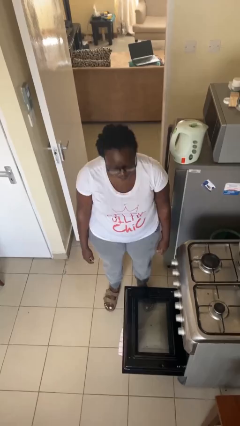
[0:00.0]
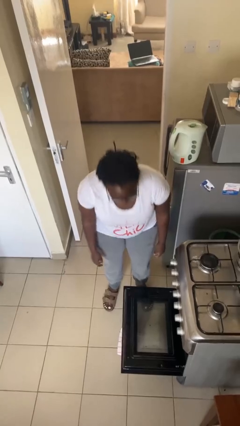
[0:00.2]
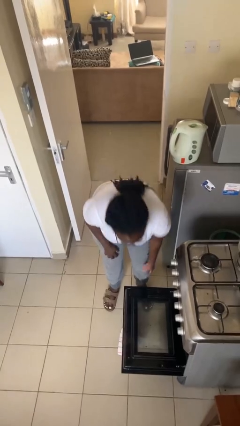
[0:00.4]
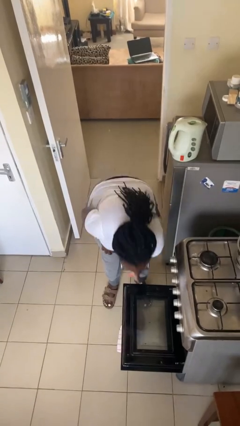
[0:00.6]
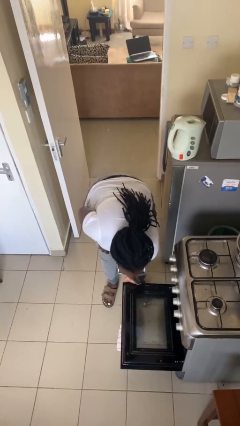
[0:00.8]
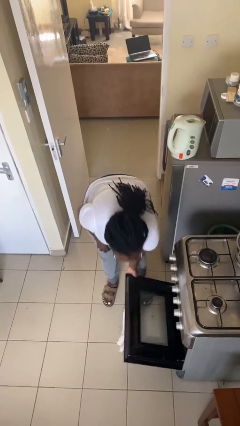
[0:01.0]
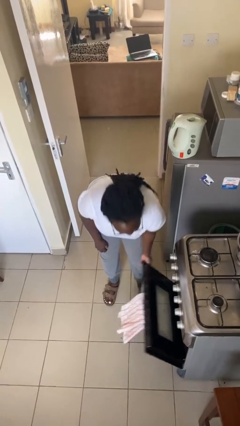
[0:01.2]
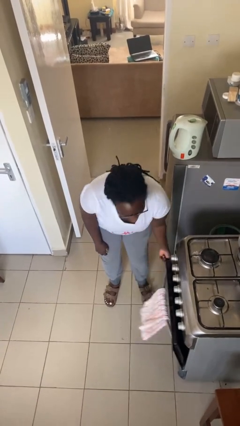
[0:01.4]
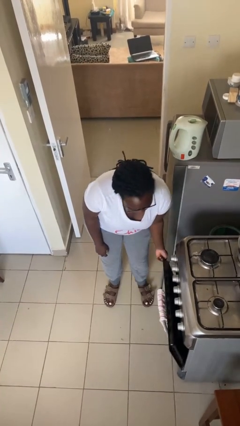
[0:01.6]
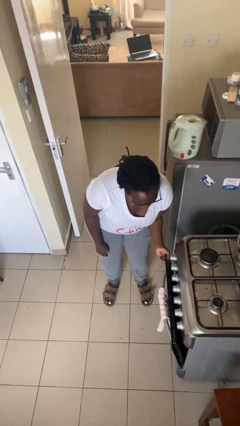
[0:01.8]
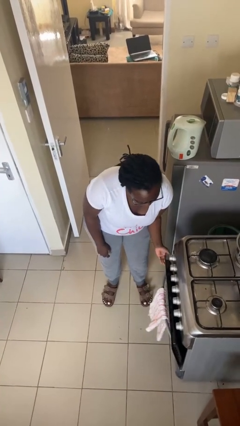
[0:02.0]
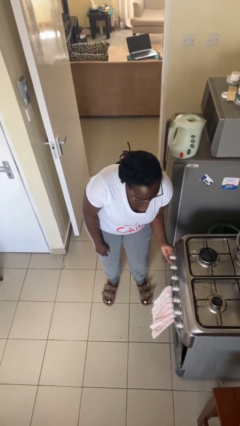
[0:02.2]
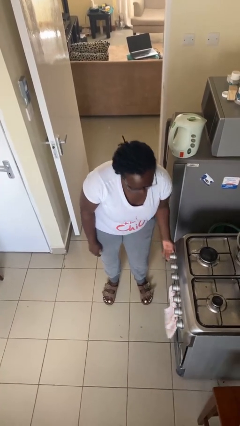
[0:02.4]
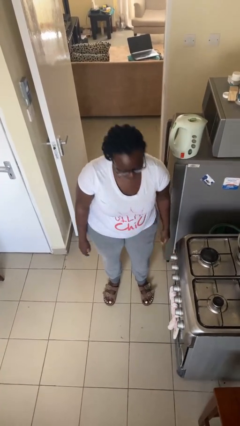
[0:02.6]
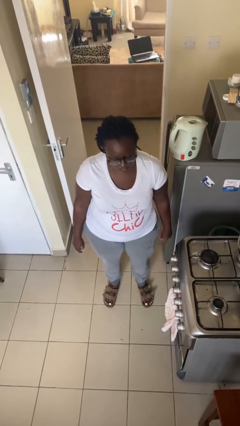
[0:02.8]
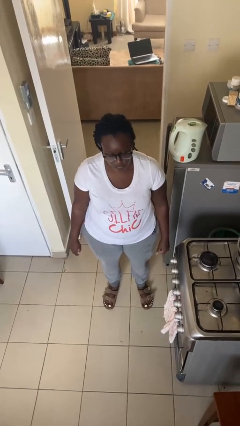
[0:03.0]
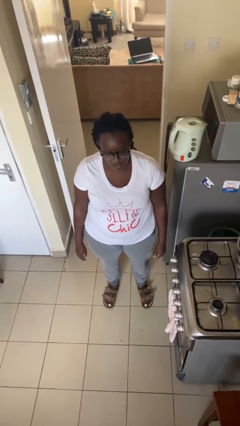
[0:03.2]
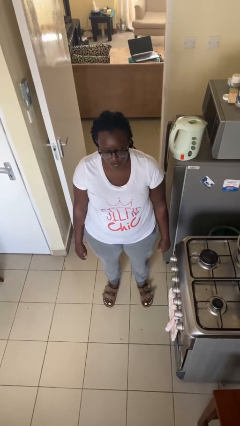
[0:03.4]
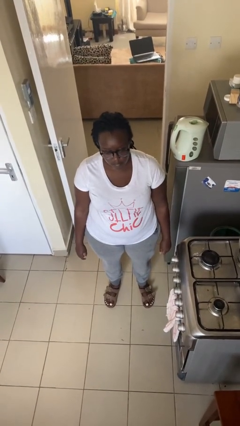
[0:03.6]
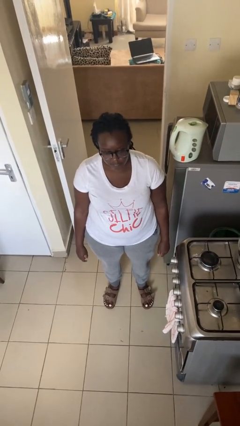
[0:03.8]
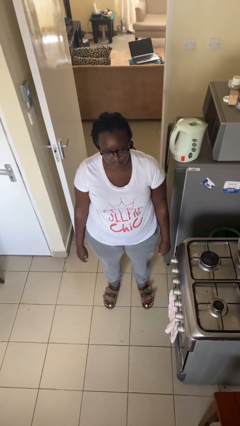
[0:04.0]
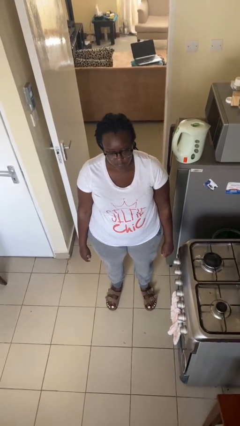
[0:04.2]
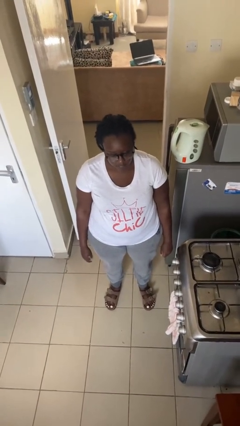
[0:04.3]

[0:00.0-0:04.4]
person closes oven door

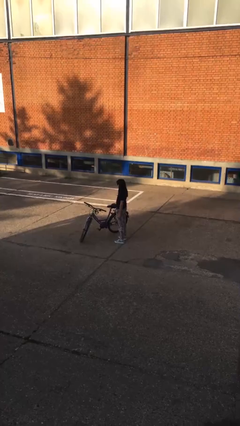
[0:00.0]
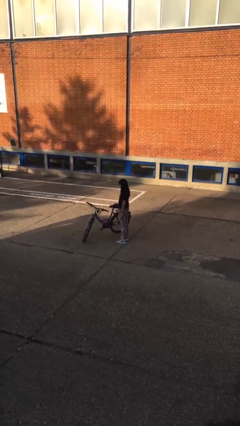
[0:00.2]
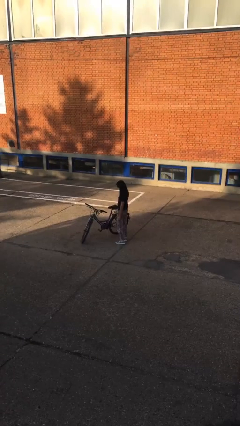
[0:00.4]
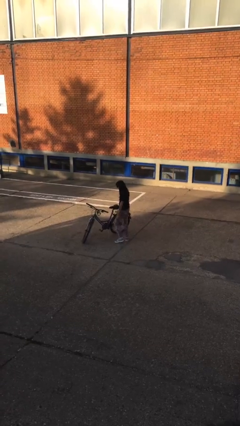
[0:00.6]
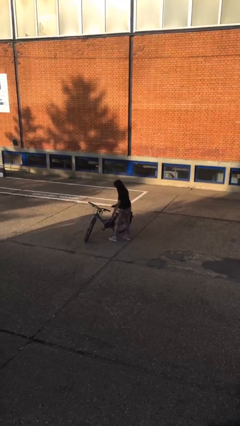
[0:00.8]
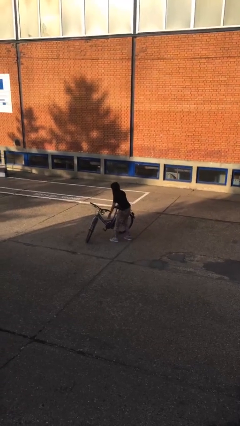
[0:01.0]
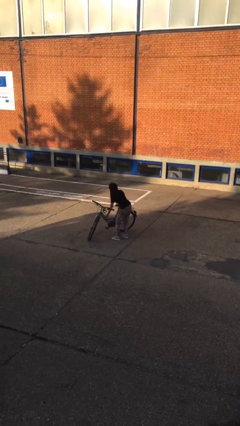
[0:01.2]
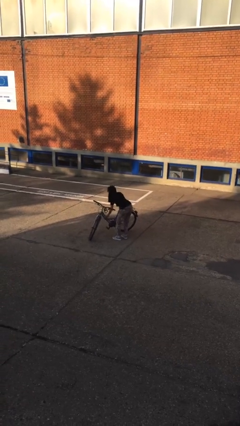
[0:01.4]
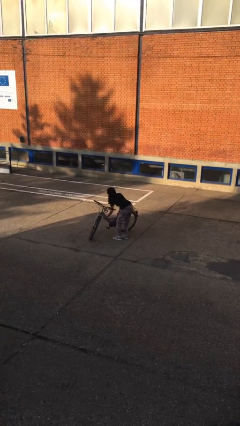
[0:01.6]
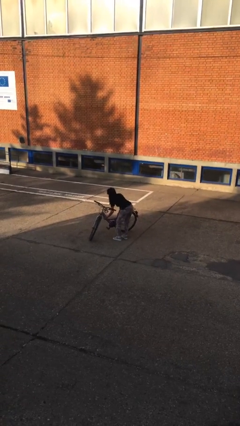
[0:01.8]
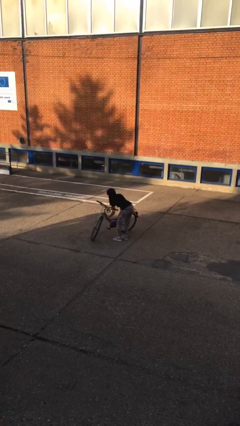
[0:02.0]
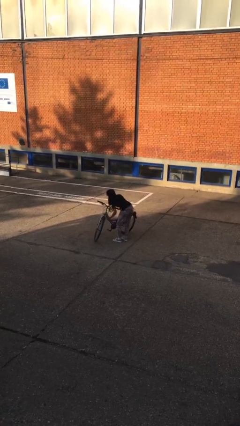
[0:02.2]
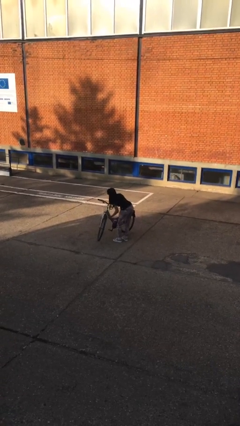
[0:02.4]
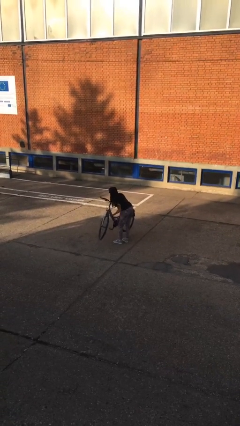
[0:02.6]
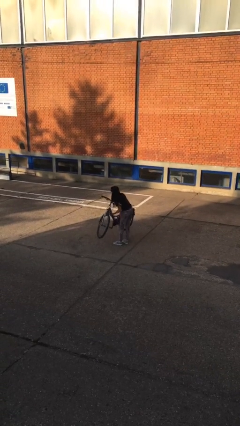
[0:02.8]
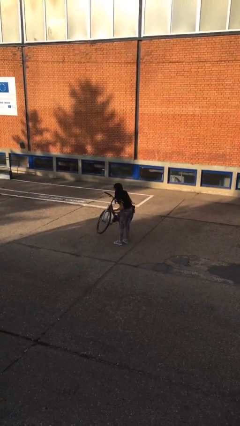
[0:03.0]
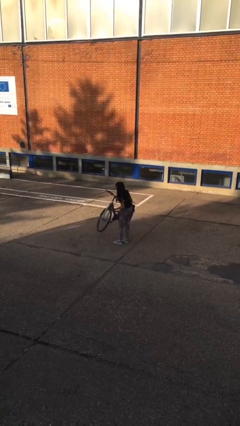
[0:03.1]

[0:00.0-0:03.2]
person picks up object from floor

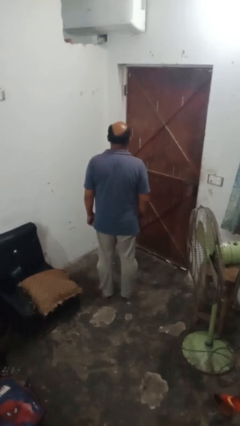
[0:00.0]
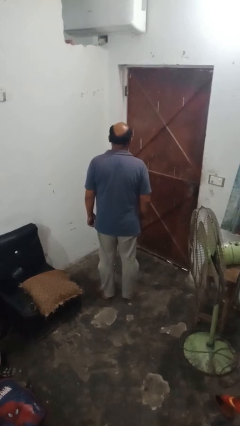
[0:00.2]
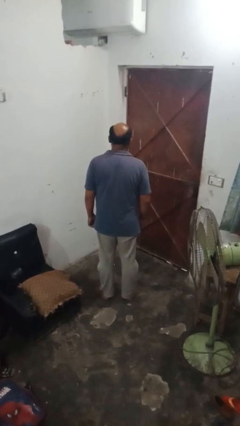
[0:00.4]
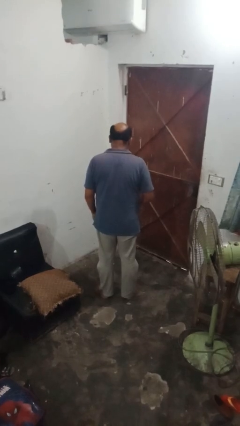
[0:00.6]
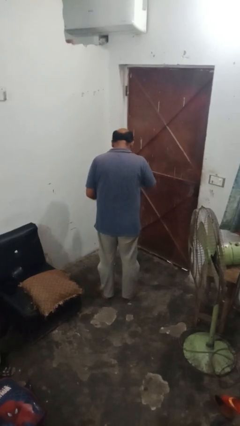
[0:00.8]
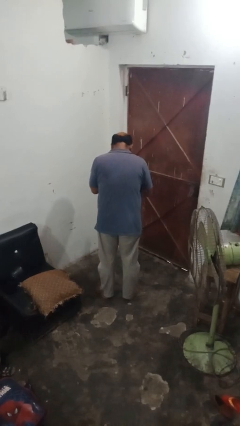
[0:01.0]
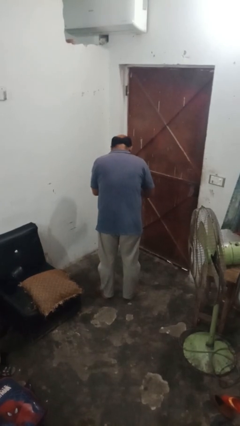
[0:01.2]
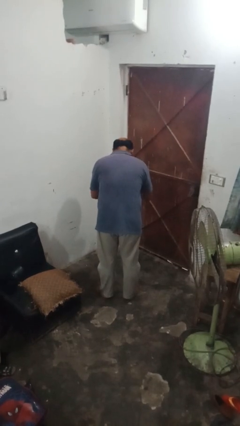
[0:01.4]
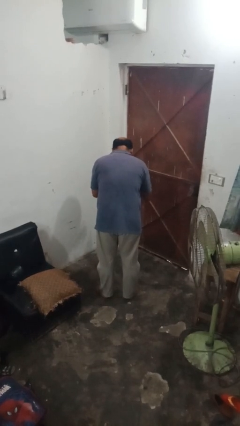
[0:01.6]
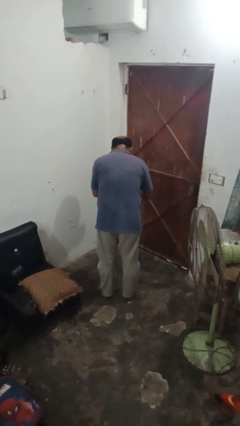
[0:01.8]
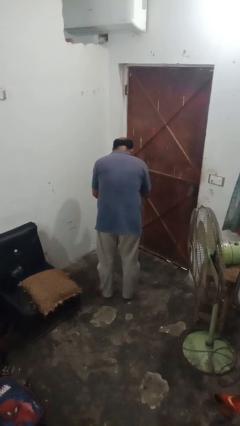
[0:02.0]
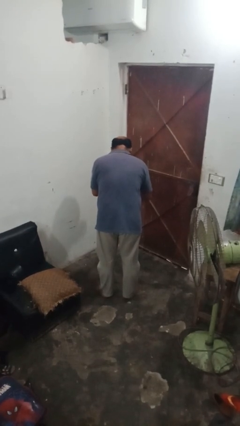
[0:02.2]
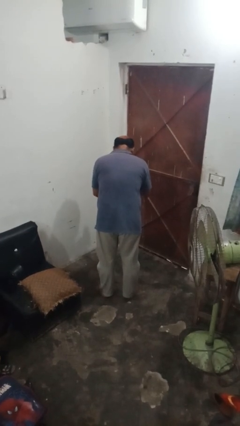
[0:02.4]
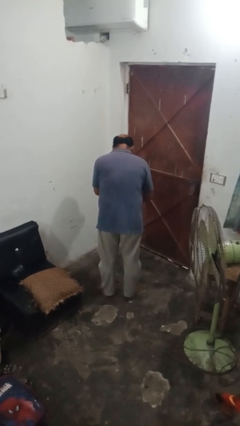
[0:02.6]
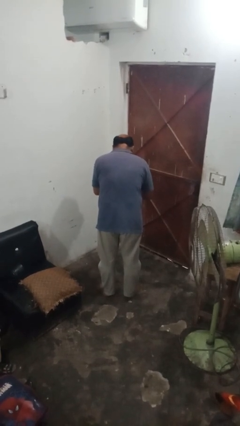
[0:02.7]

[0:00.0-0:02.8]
person drums on chest

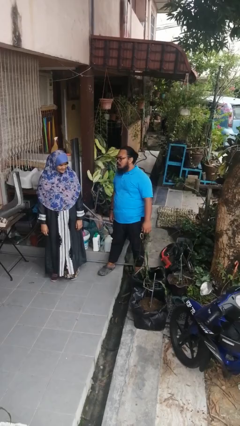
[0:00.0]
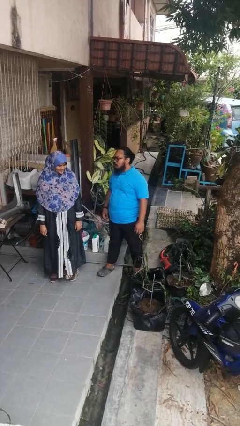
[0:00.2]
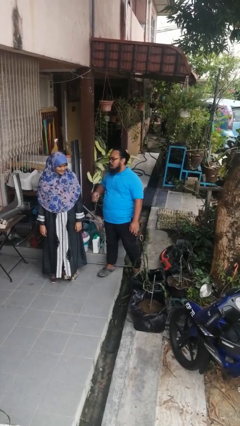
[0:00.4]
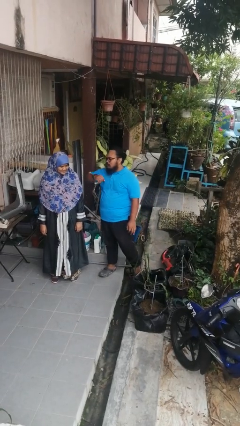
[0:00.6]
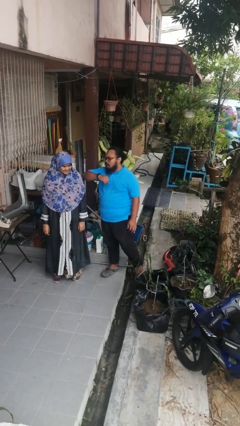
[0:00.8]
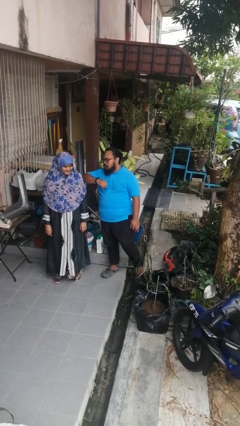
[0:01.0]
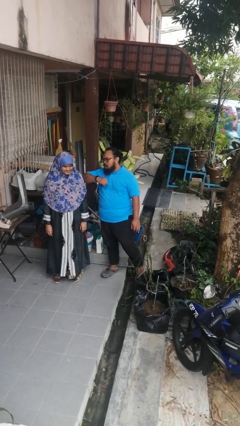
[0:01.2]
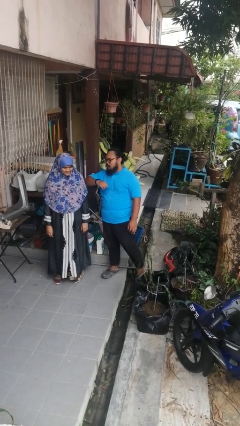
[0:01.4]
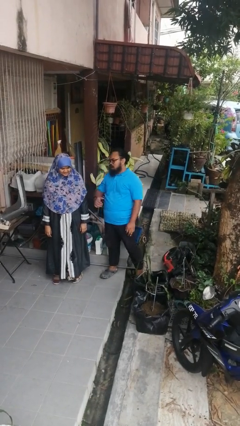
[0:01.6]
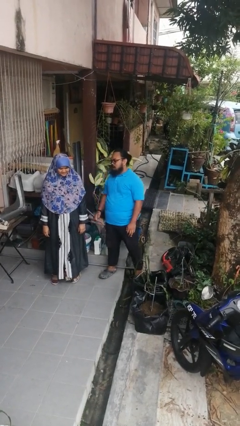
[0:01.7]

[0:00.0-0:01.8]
person nudges person with elbow

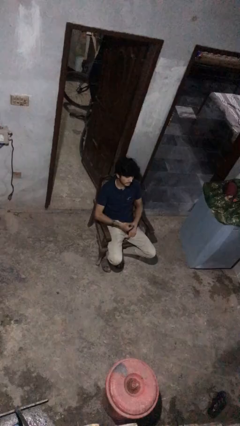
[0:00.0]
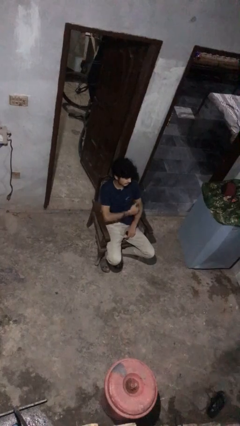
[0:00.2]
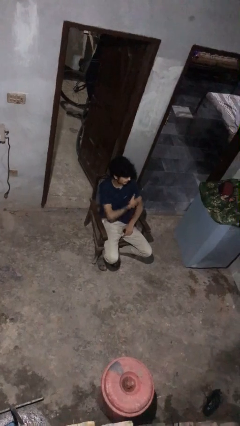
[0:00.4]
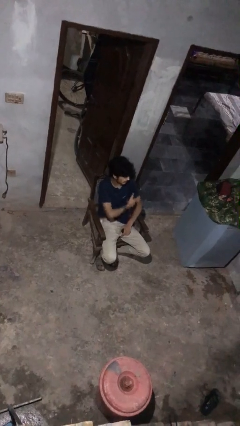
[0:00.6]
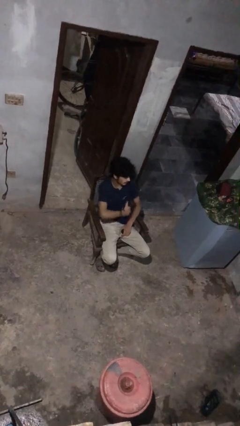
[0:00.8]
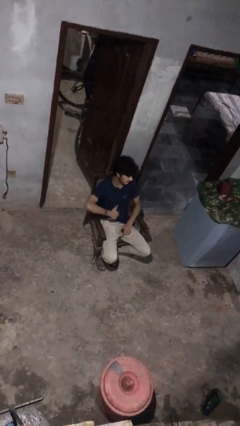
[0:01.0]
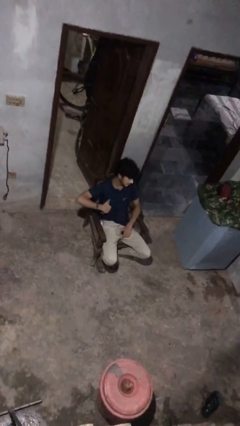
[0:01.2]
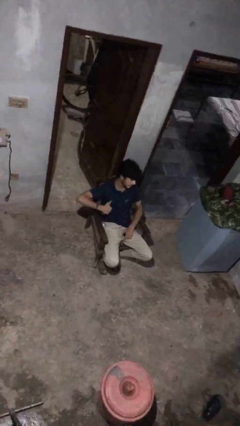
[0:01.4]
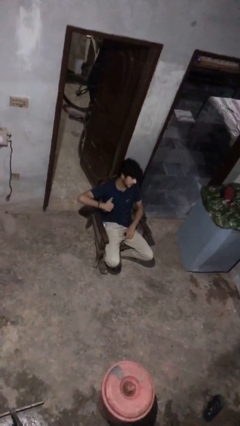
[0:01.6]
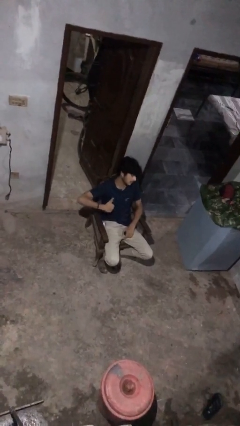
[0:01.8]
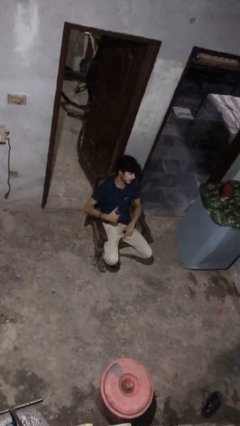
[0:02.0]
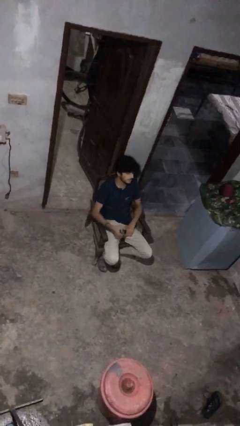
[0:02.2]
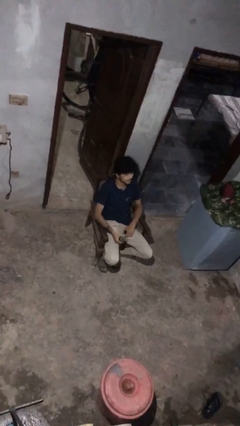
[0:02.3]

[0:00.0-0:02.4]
person applies deodorant

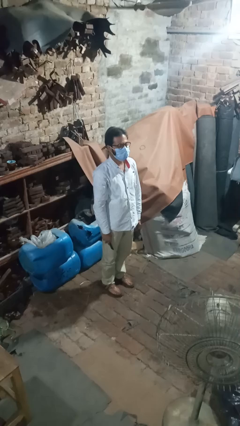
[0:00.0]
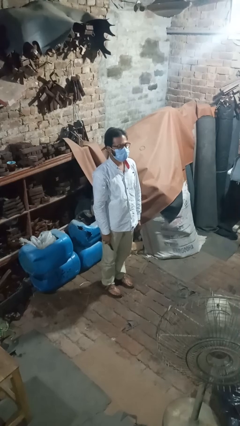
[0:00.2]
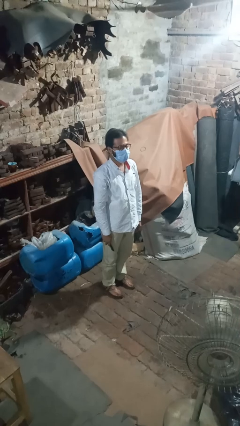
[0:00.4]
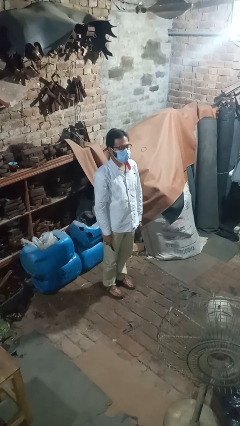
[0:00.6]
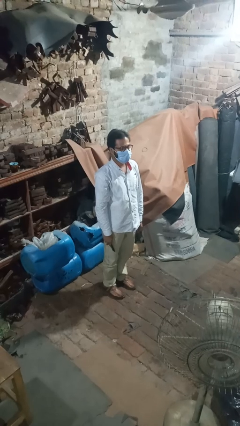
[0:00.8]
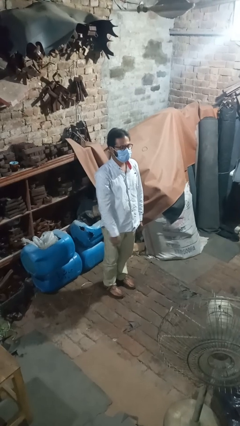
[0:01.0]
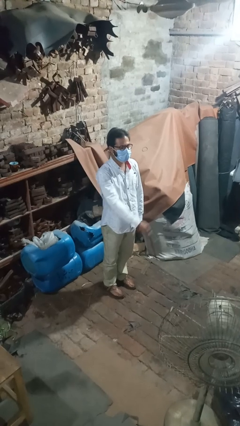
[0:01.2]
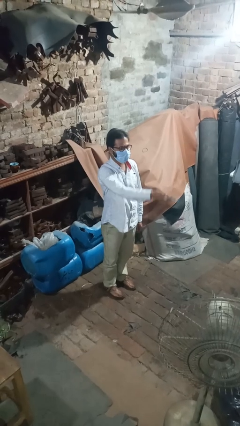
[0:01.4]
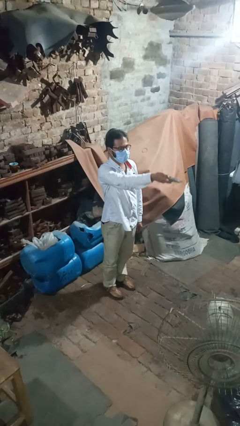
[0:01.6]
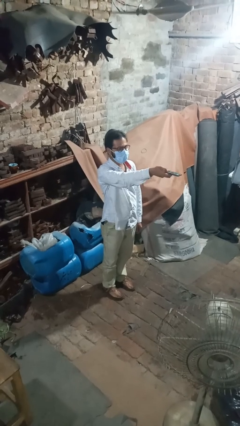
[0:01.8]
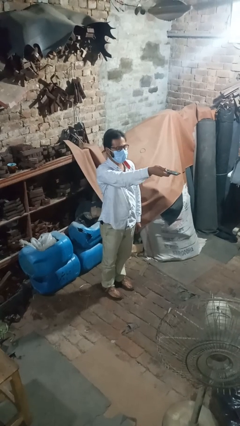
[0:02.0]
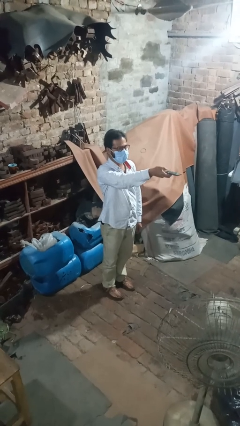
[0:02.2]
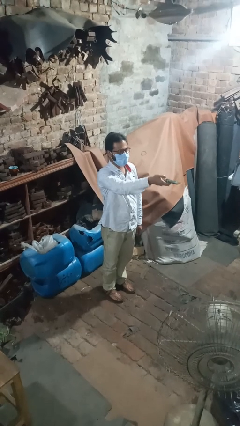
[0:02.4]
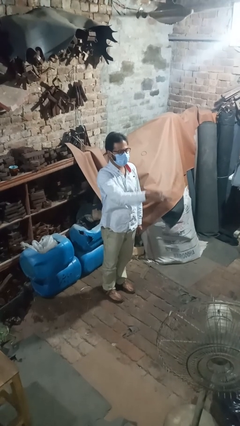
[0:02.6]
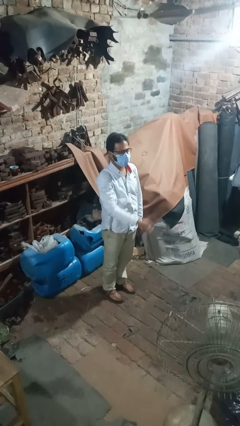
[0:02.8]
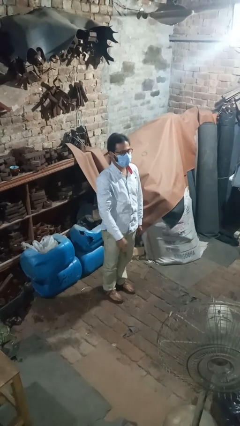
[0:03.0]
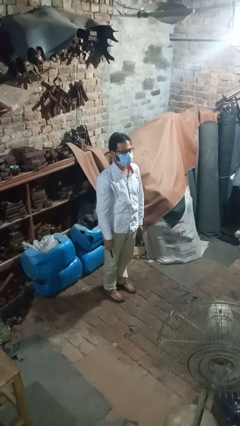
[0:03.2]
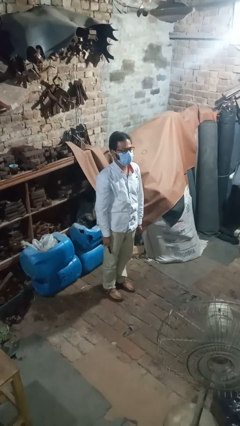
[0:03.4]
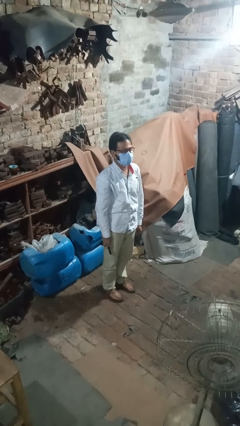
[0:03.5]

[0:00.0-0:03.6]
person uses television remote
